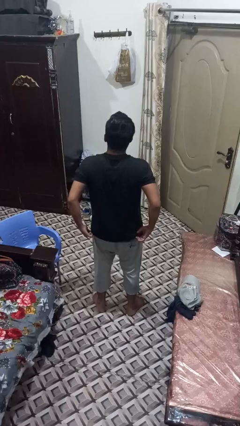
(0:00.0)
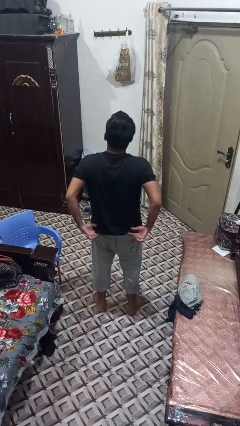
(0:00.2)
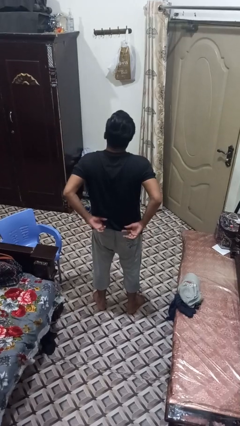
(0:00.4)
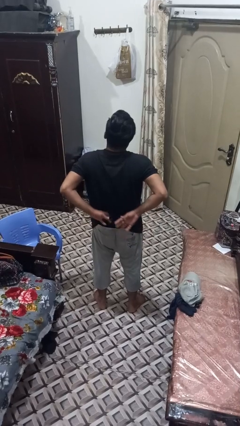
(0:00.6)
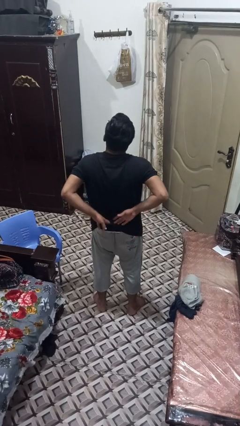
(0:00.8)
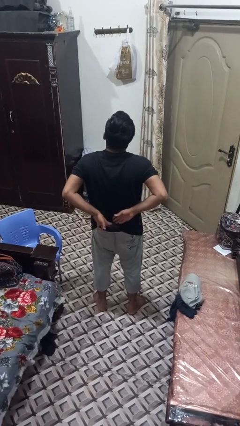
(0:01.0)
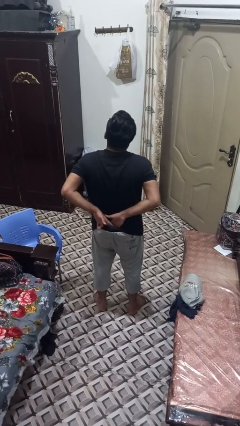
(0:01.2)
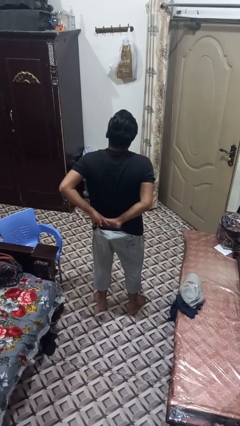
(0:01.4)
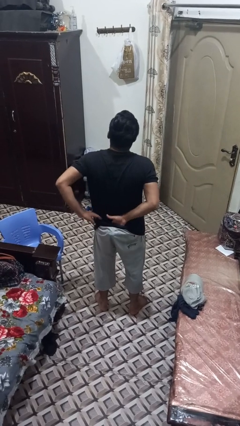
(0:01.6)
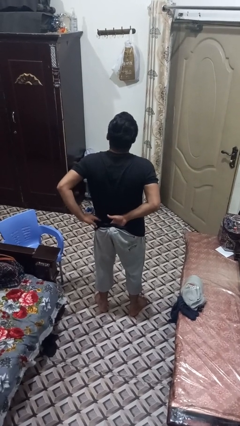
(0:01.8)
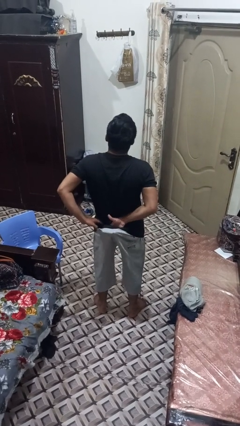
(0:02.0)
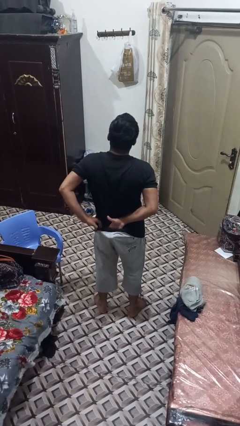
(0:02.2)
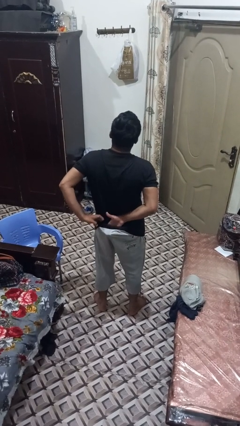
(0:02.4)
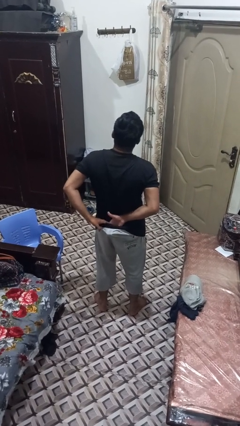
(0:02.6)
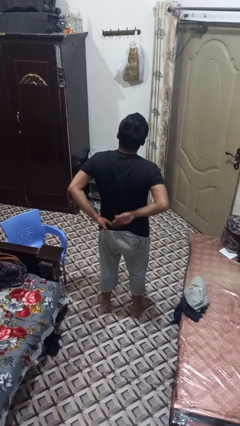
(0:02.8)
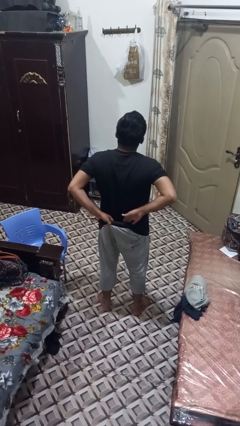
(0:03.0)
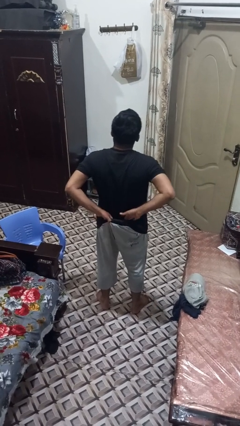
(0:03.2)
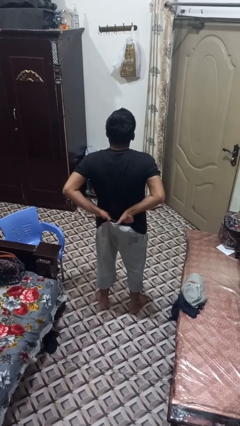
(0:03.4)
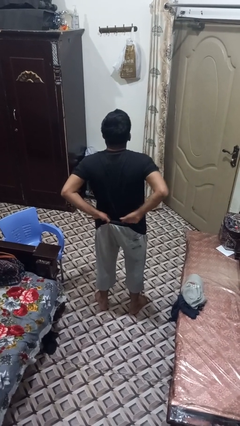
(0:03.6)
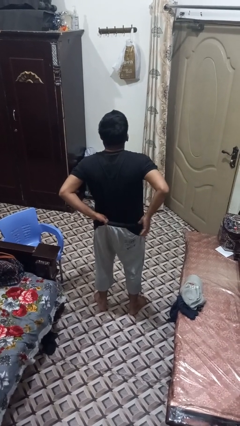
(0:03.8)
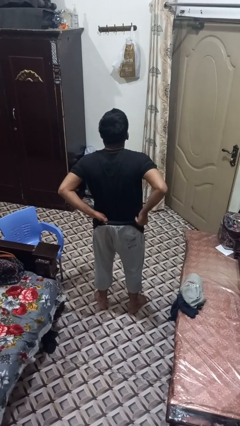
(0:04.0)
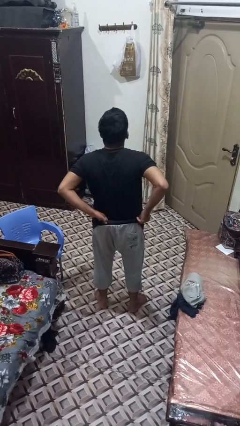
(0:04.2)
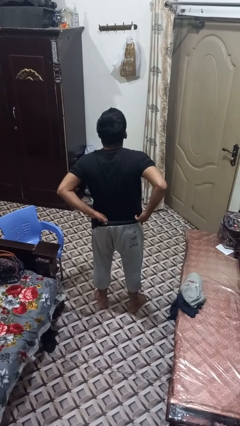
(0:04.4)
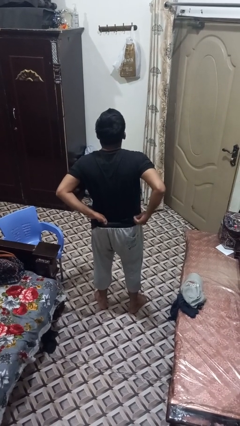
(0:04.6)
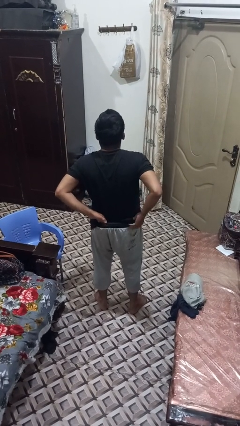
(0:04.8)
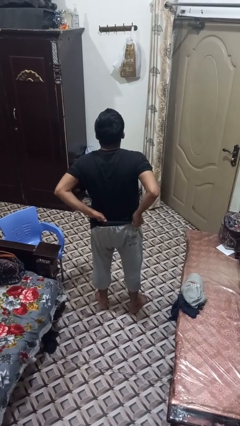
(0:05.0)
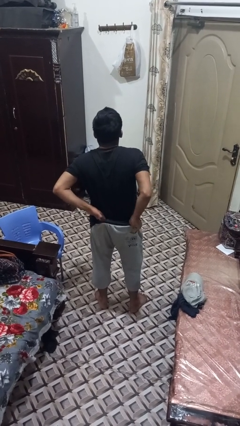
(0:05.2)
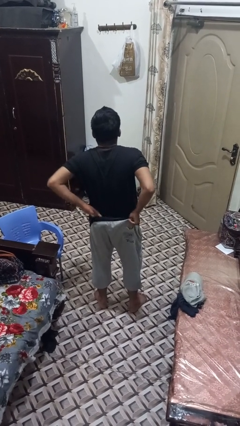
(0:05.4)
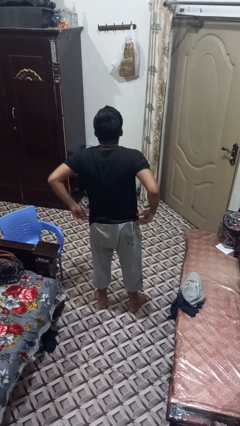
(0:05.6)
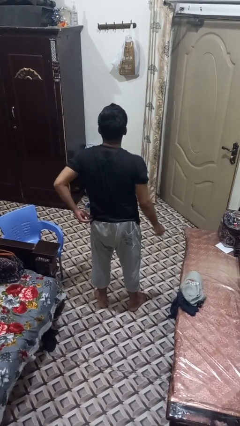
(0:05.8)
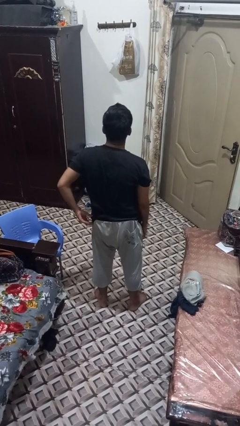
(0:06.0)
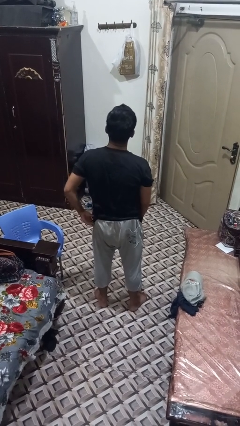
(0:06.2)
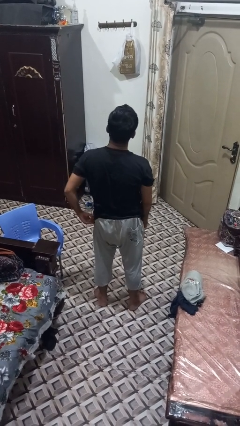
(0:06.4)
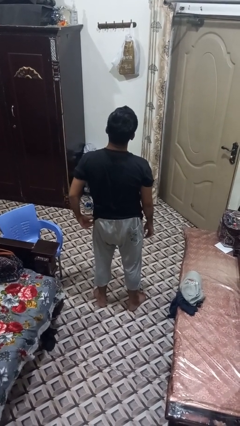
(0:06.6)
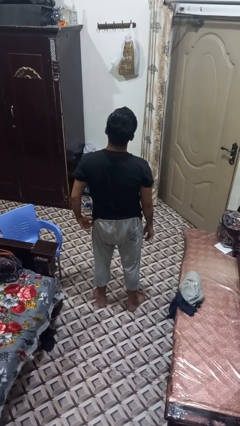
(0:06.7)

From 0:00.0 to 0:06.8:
person tucks in shirt

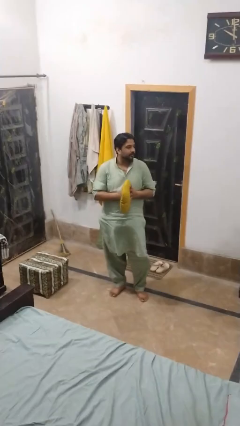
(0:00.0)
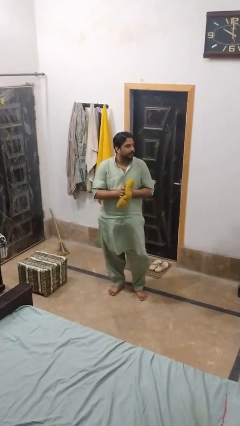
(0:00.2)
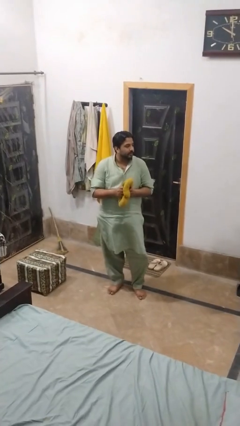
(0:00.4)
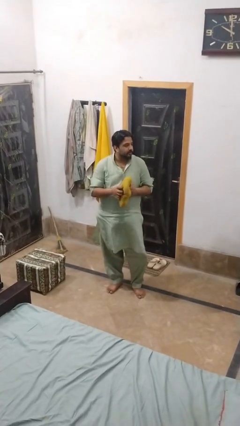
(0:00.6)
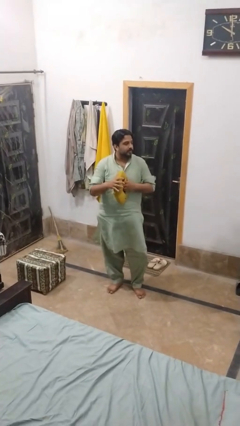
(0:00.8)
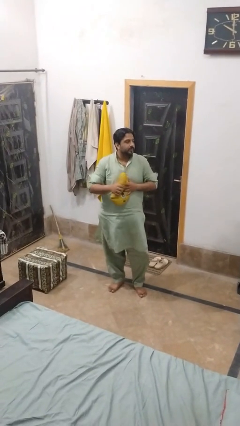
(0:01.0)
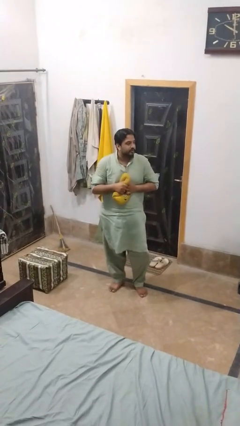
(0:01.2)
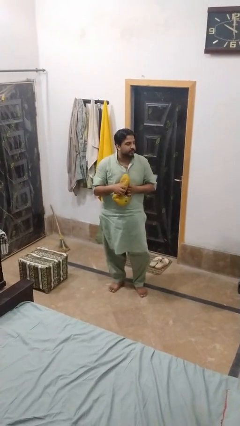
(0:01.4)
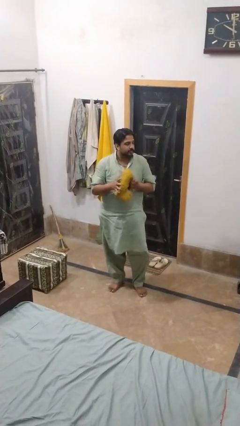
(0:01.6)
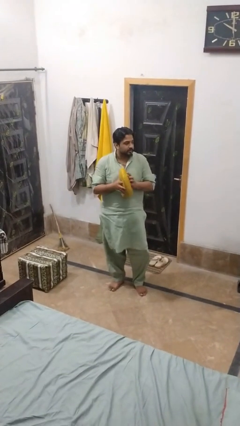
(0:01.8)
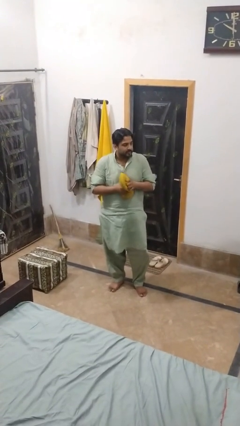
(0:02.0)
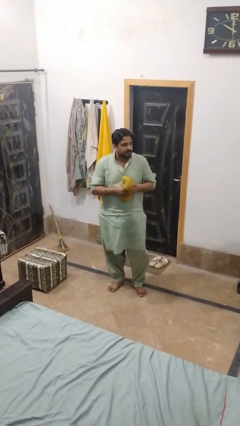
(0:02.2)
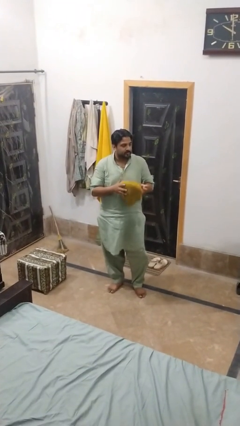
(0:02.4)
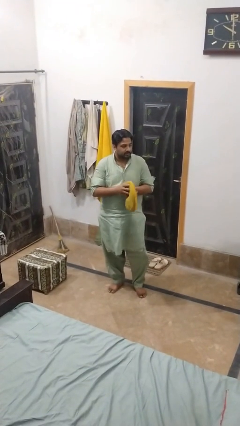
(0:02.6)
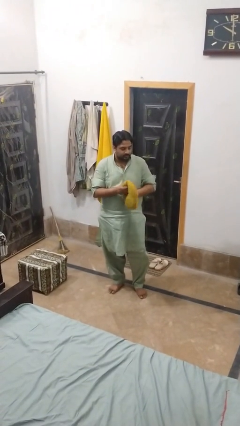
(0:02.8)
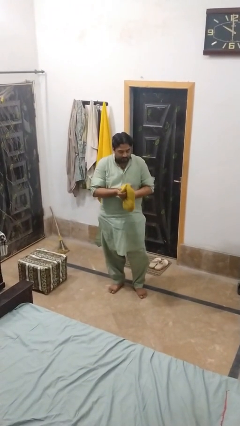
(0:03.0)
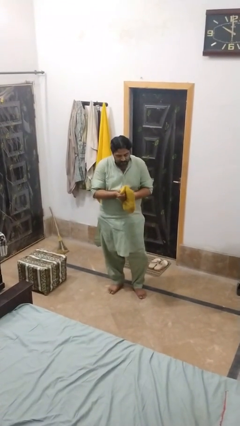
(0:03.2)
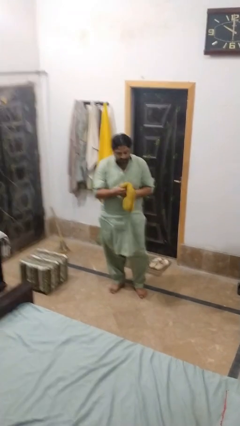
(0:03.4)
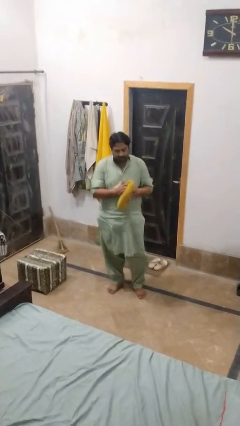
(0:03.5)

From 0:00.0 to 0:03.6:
person squeezes object

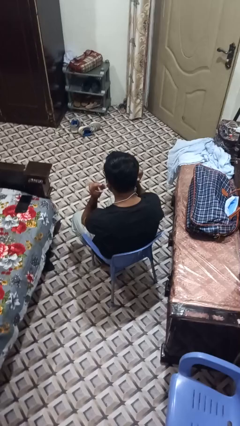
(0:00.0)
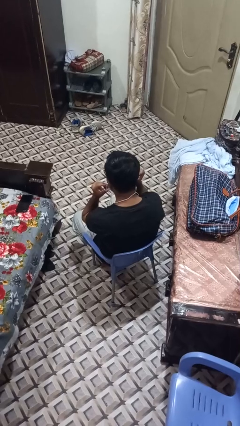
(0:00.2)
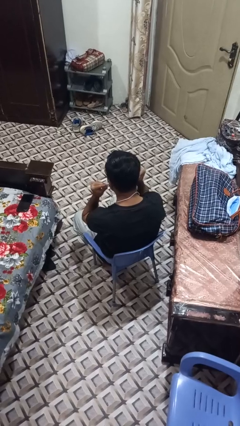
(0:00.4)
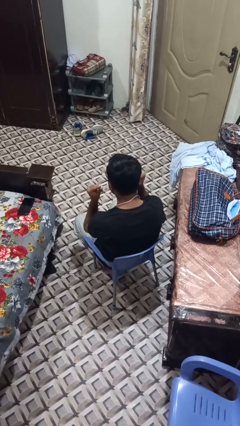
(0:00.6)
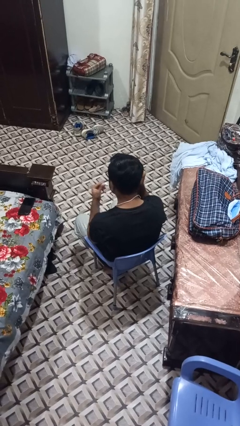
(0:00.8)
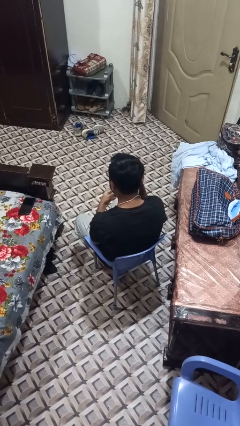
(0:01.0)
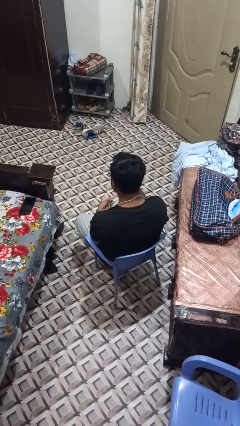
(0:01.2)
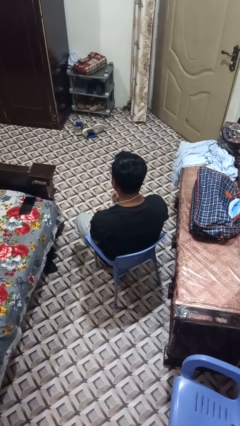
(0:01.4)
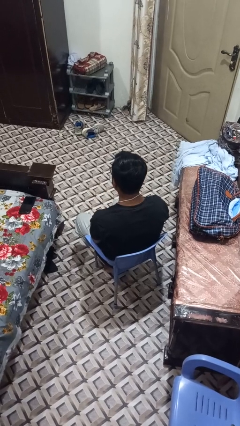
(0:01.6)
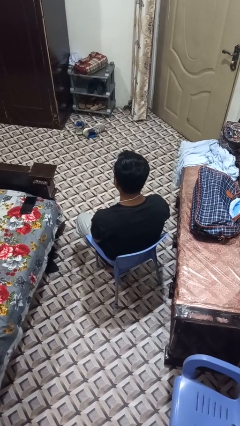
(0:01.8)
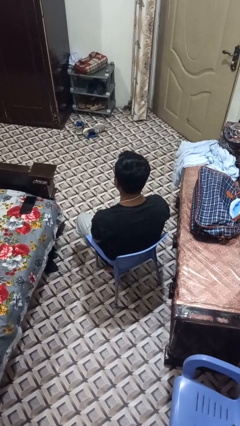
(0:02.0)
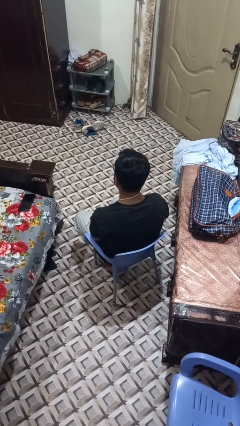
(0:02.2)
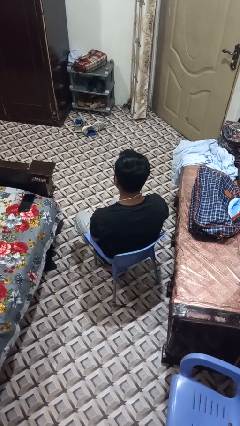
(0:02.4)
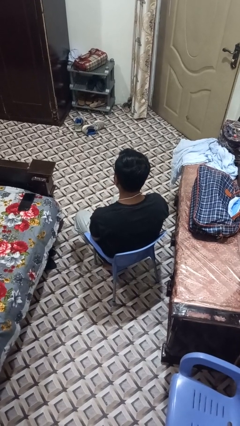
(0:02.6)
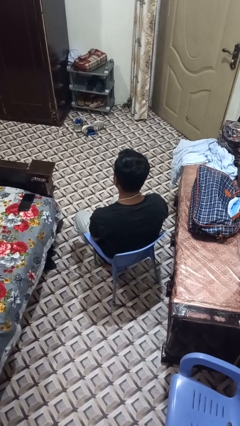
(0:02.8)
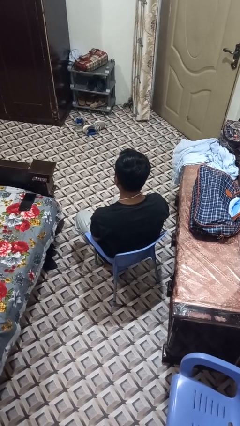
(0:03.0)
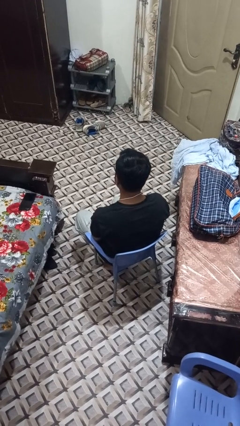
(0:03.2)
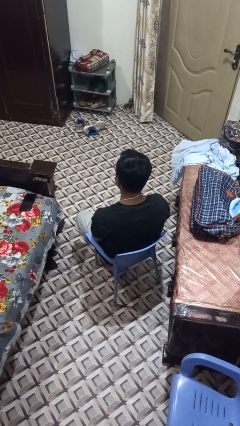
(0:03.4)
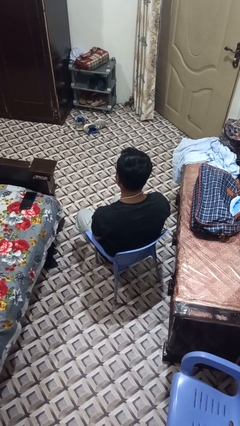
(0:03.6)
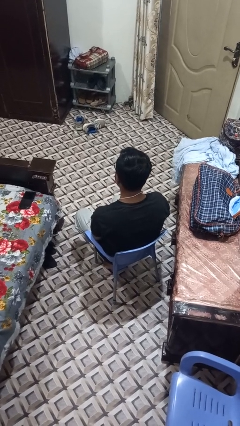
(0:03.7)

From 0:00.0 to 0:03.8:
person takes off headphones

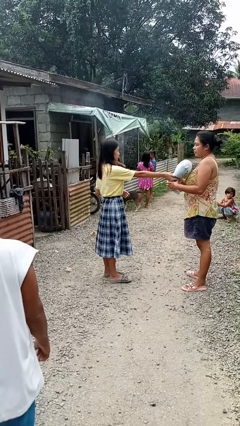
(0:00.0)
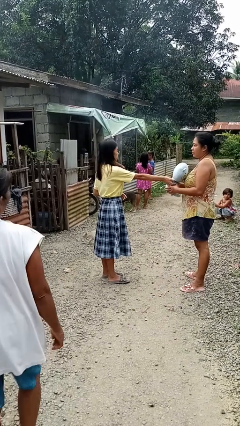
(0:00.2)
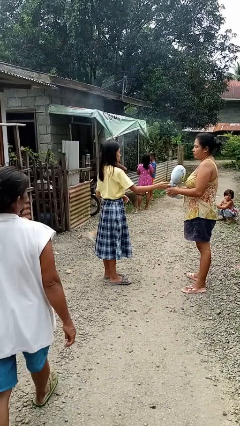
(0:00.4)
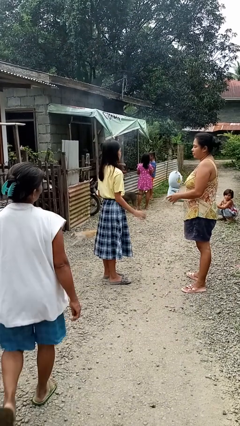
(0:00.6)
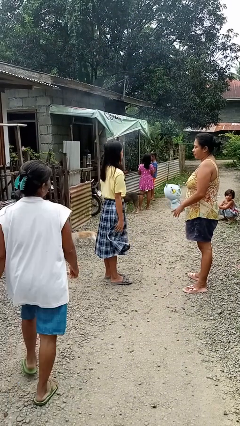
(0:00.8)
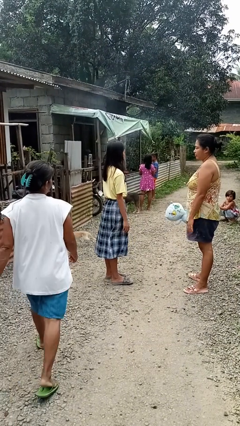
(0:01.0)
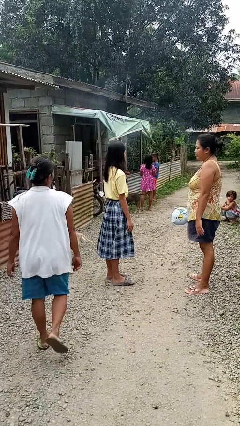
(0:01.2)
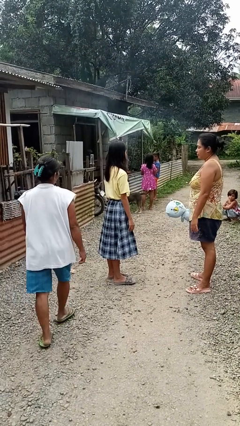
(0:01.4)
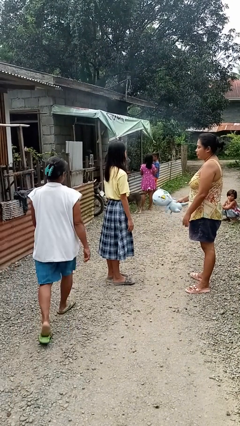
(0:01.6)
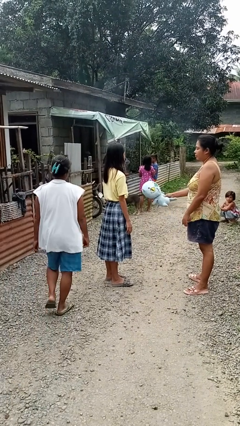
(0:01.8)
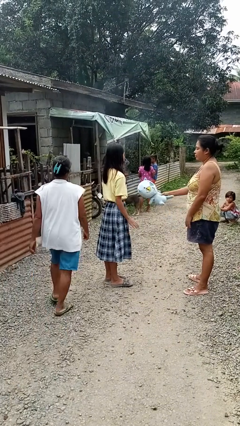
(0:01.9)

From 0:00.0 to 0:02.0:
person transfers object to person

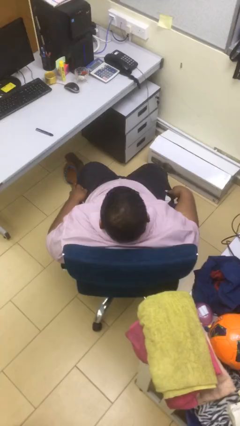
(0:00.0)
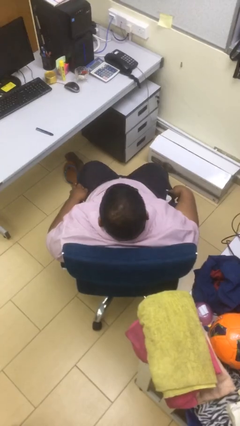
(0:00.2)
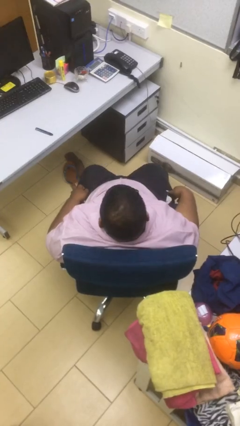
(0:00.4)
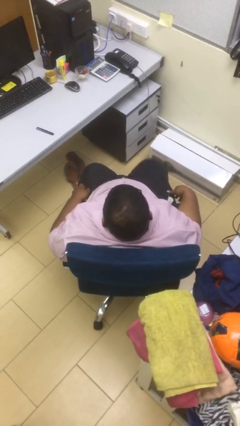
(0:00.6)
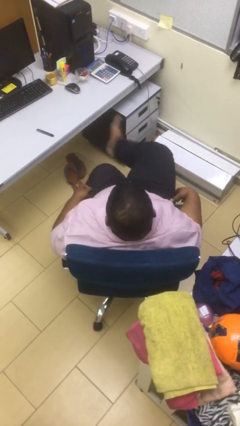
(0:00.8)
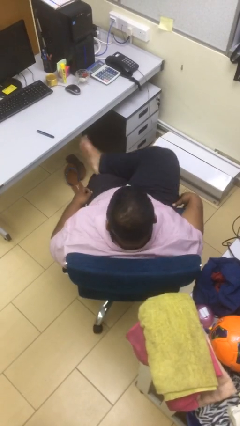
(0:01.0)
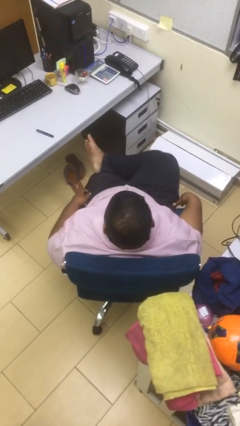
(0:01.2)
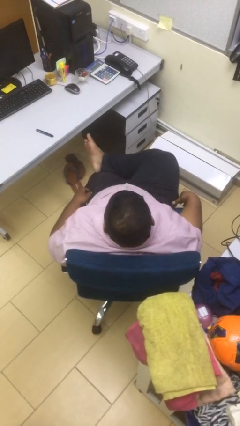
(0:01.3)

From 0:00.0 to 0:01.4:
person crosses legs
